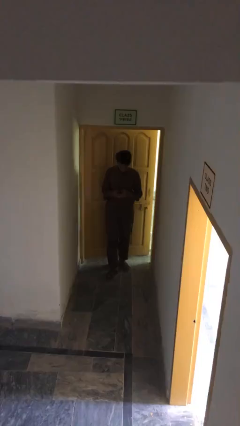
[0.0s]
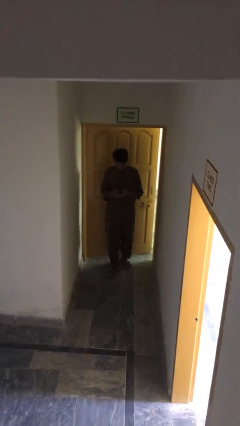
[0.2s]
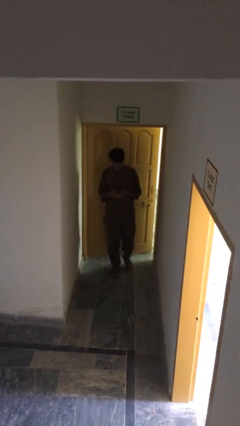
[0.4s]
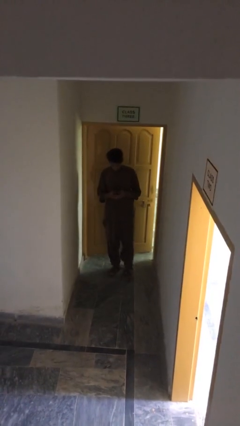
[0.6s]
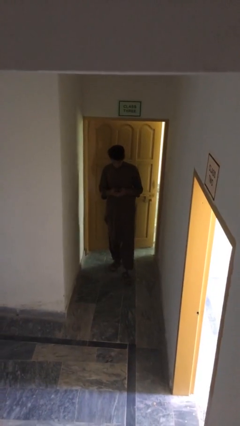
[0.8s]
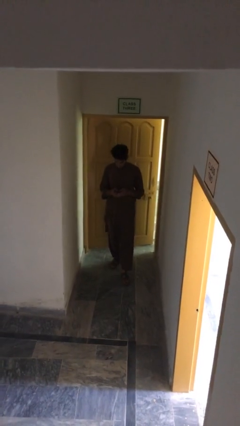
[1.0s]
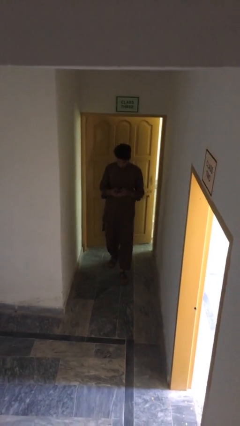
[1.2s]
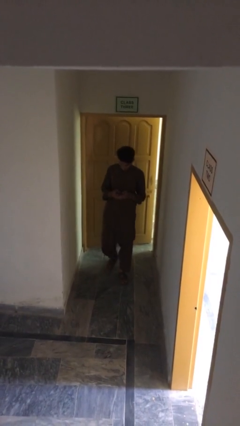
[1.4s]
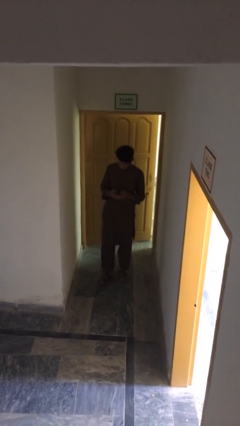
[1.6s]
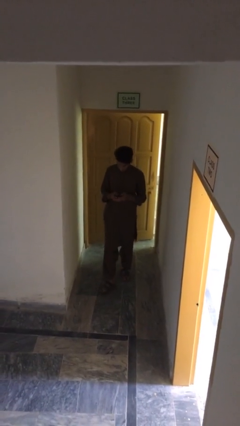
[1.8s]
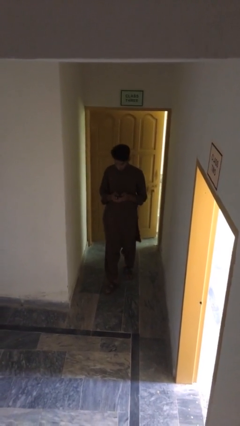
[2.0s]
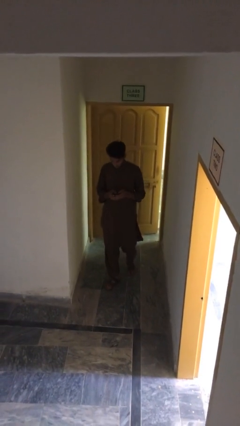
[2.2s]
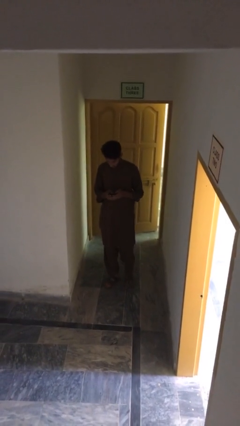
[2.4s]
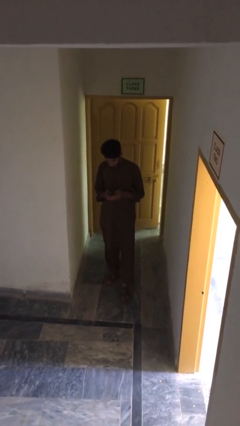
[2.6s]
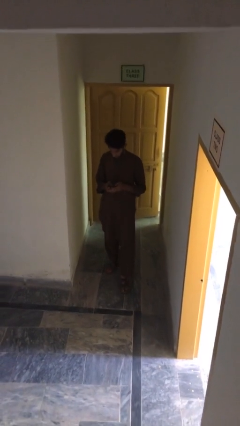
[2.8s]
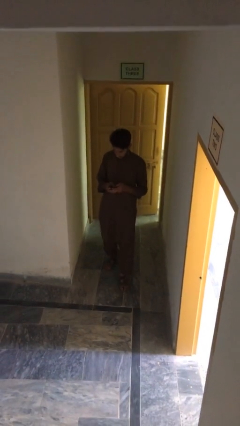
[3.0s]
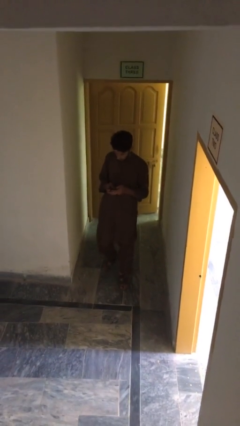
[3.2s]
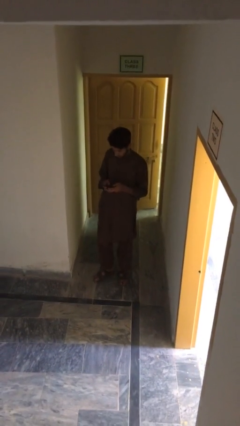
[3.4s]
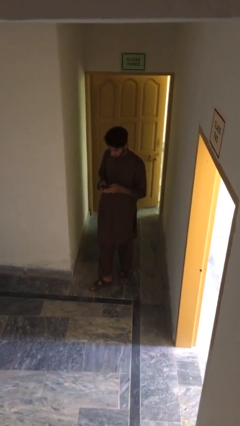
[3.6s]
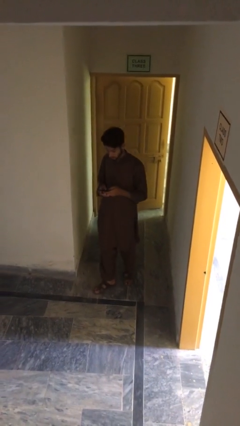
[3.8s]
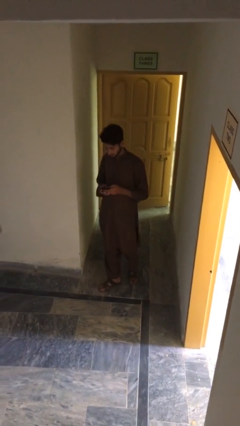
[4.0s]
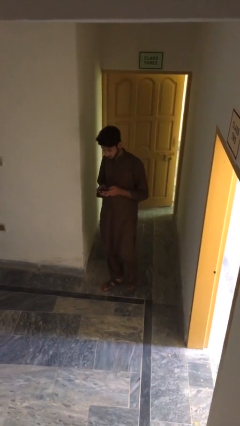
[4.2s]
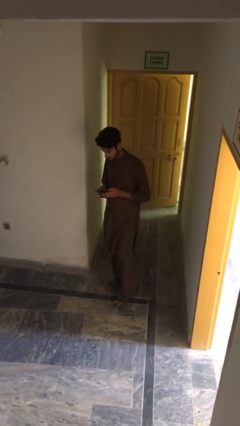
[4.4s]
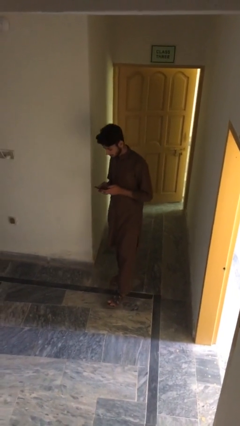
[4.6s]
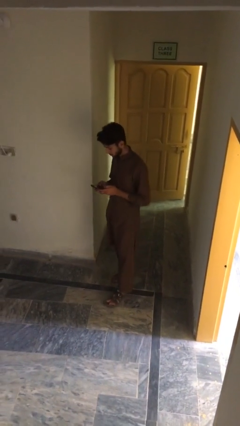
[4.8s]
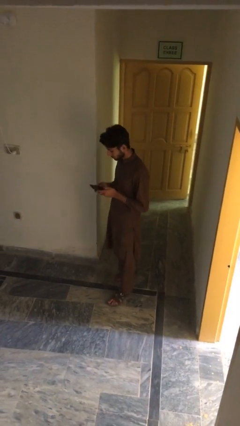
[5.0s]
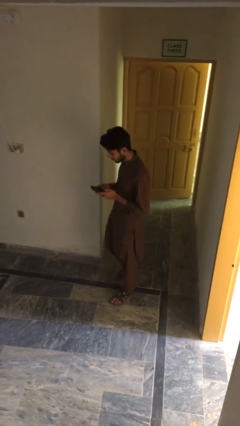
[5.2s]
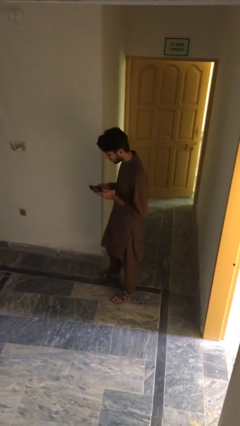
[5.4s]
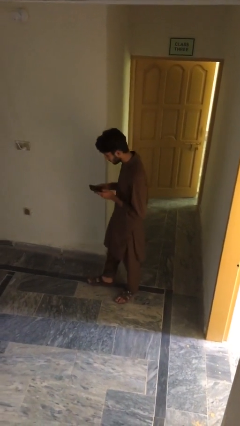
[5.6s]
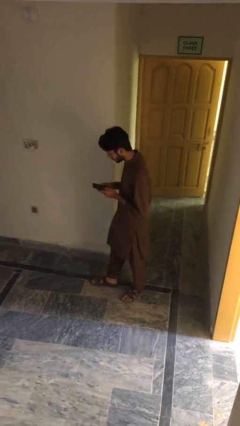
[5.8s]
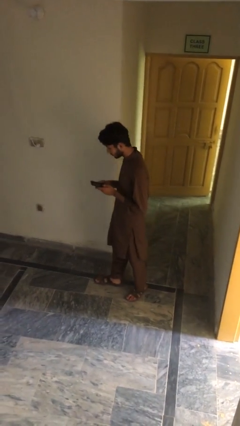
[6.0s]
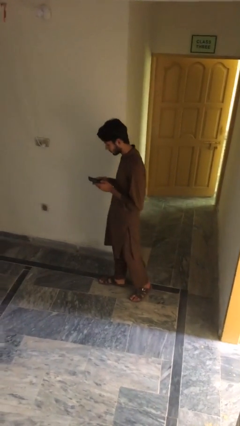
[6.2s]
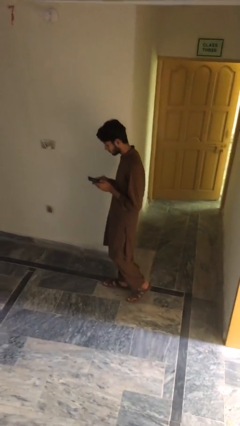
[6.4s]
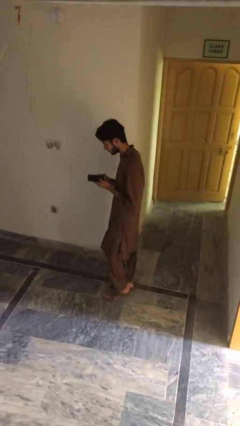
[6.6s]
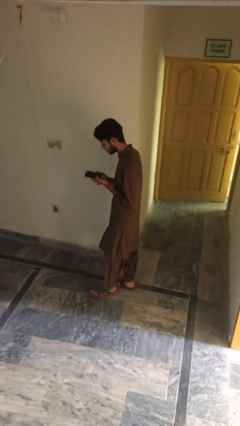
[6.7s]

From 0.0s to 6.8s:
person texts on phone

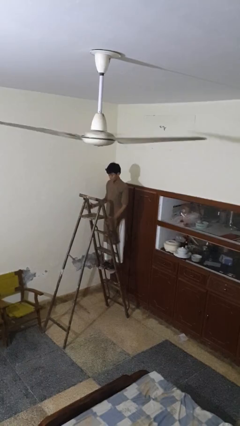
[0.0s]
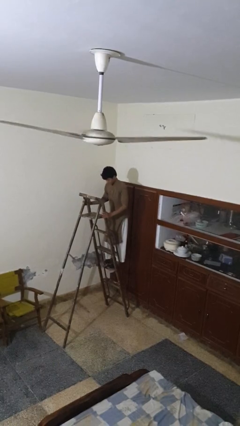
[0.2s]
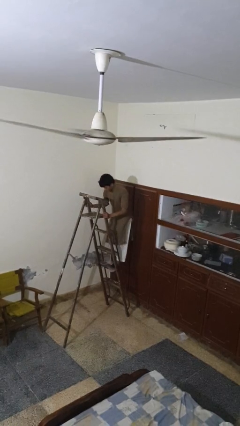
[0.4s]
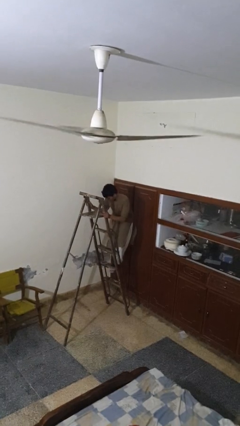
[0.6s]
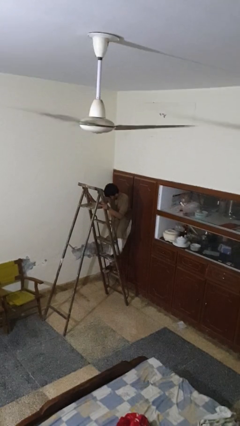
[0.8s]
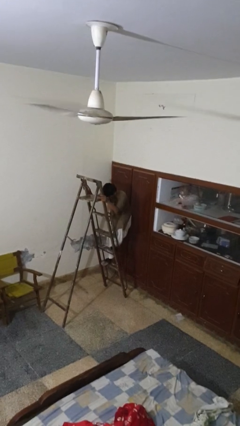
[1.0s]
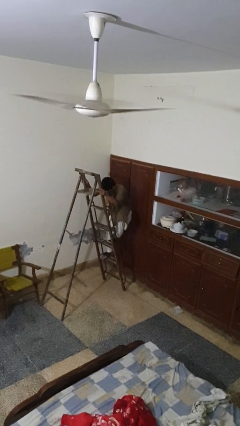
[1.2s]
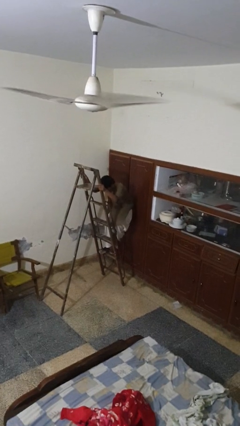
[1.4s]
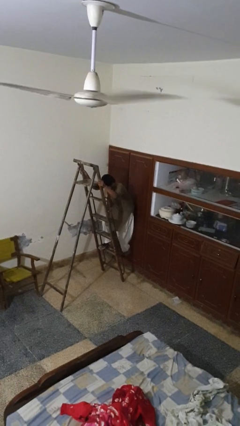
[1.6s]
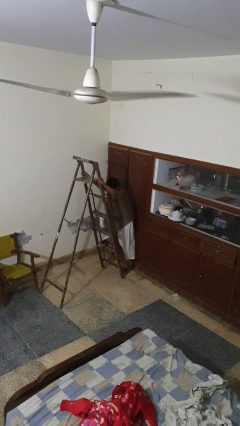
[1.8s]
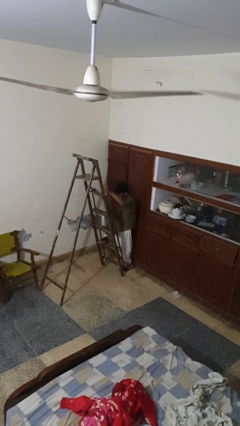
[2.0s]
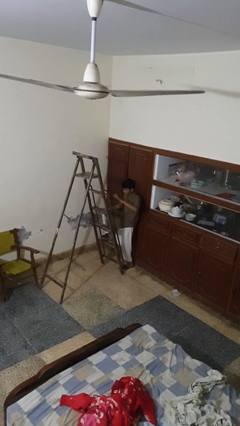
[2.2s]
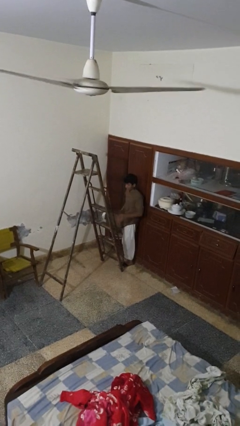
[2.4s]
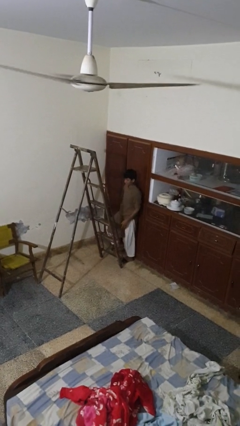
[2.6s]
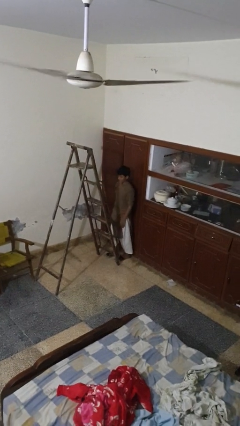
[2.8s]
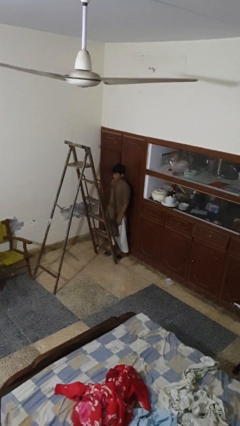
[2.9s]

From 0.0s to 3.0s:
person climbs down ladder

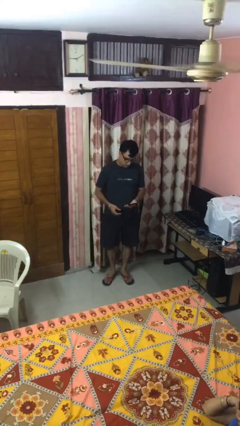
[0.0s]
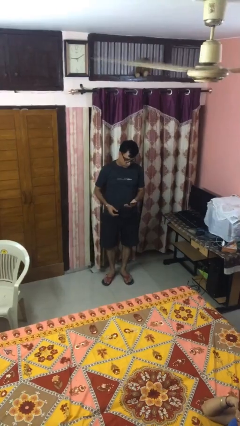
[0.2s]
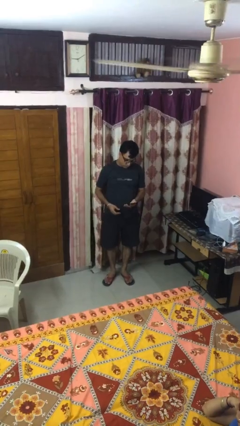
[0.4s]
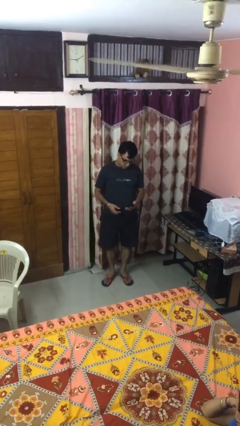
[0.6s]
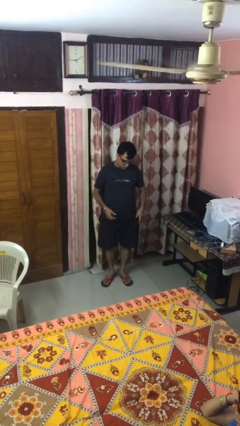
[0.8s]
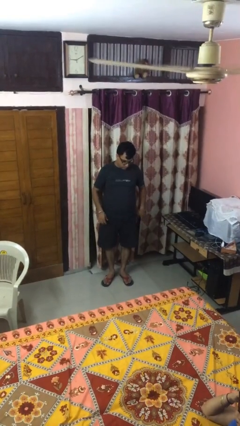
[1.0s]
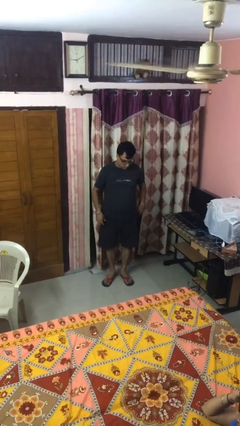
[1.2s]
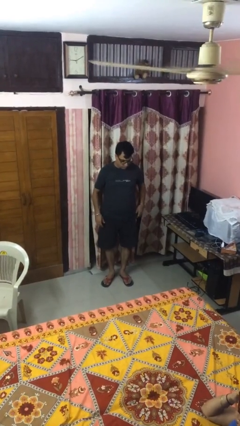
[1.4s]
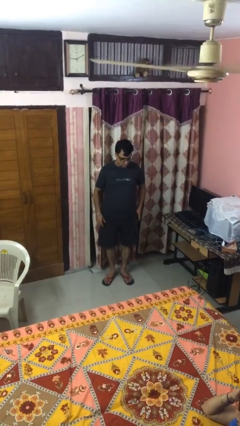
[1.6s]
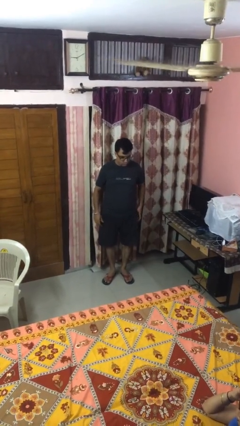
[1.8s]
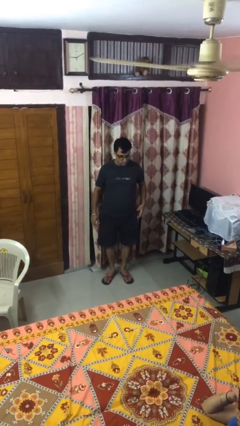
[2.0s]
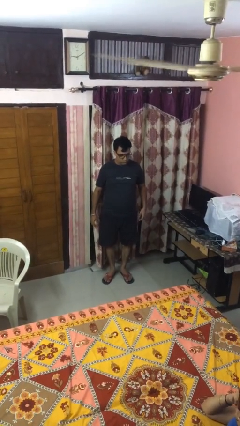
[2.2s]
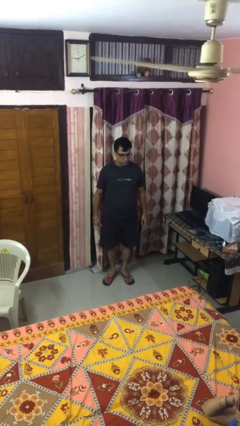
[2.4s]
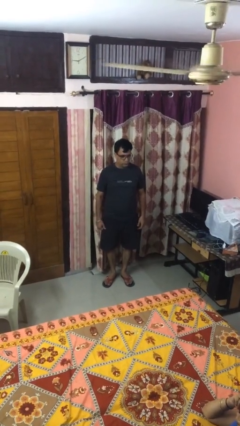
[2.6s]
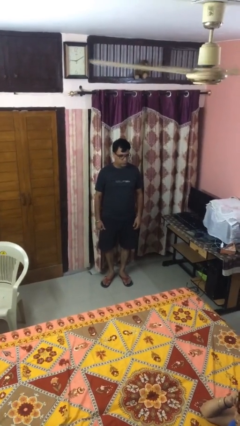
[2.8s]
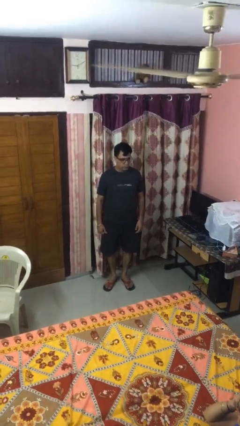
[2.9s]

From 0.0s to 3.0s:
person puts phone into pocket

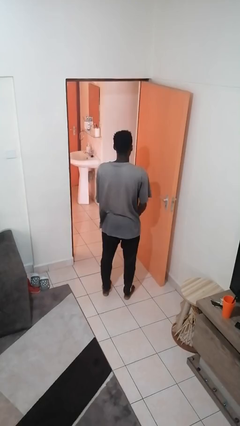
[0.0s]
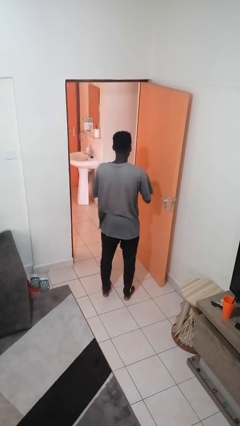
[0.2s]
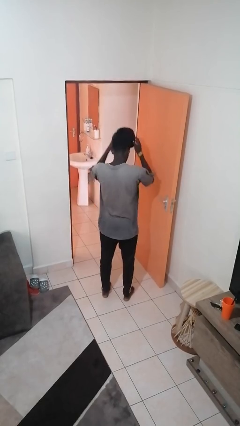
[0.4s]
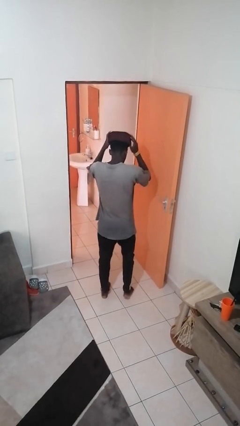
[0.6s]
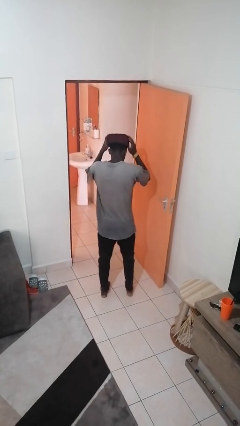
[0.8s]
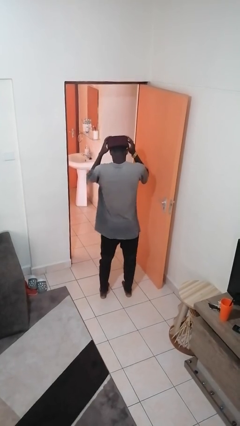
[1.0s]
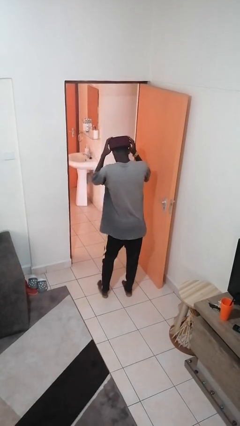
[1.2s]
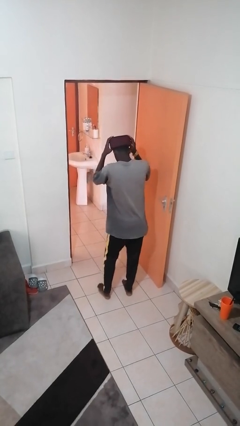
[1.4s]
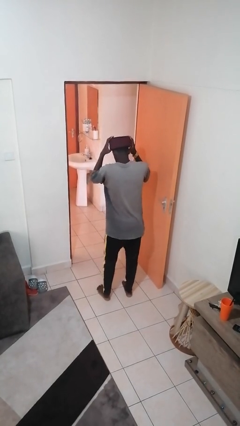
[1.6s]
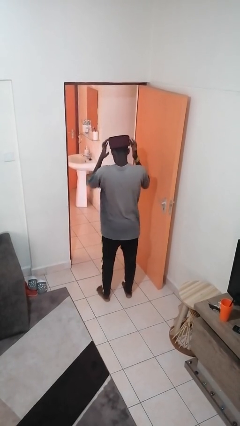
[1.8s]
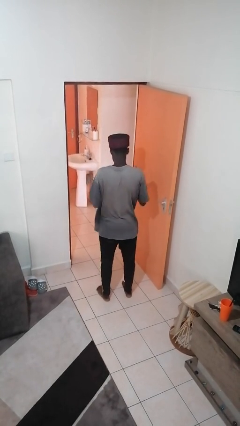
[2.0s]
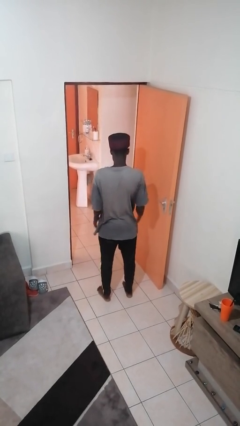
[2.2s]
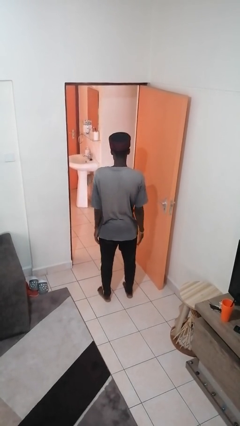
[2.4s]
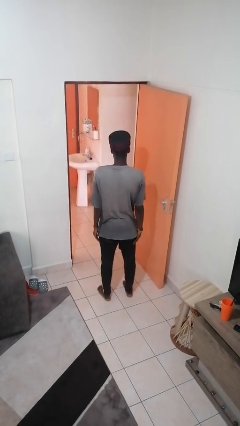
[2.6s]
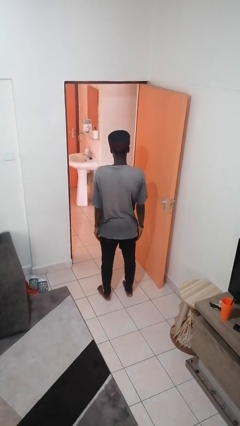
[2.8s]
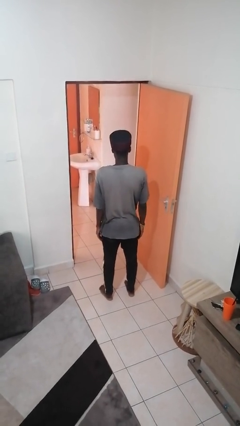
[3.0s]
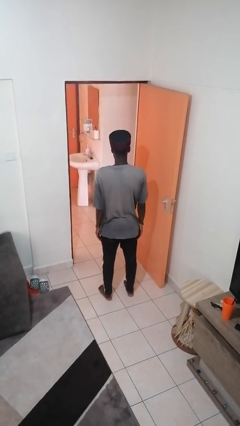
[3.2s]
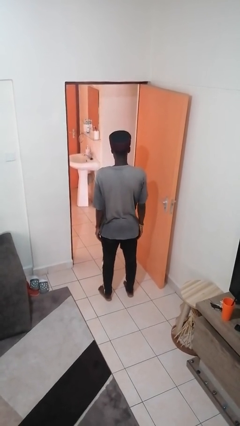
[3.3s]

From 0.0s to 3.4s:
person puts on hat

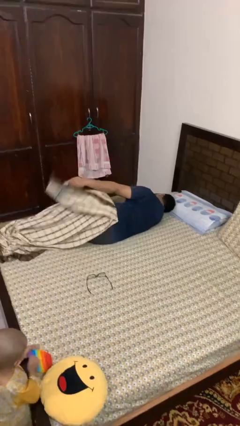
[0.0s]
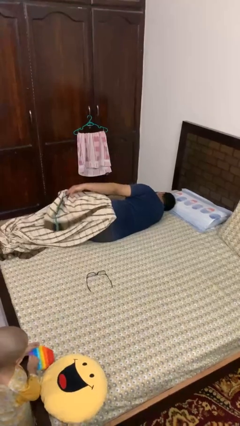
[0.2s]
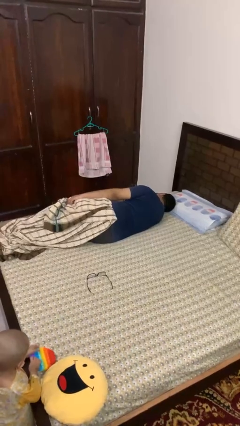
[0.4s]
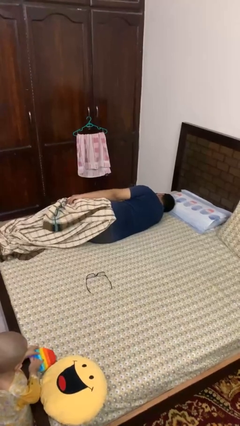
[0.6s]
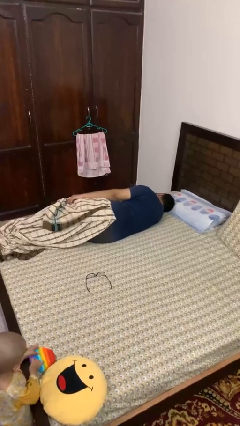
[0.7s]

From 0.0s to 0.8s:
person uncovers with blanket

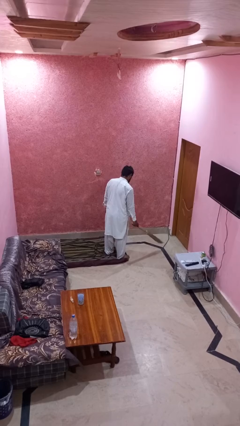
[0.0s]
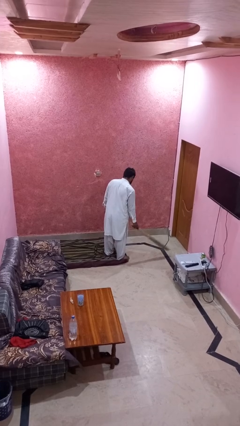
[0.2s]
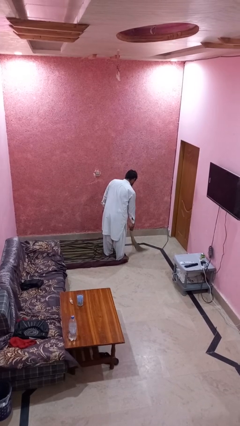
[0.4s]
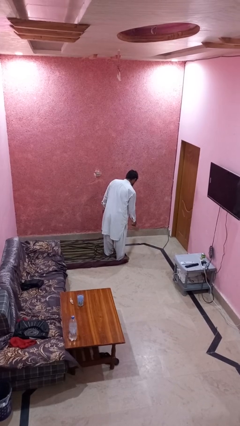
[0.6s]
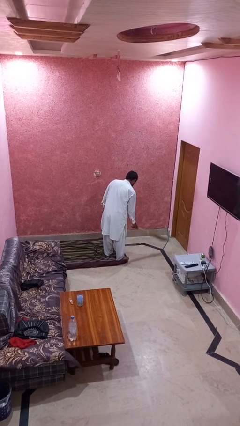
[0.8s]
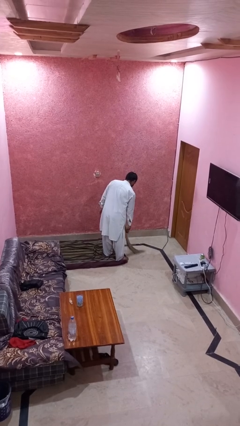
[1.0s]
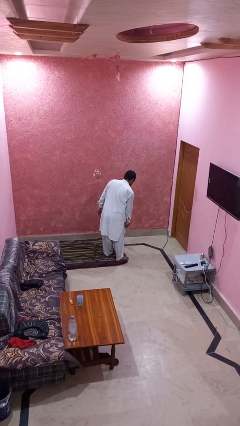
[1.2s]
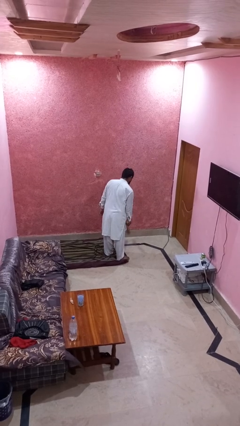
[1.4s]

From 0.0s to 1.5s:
person sweeps floor
